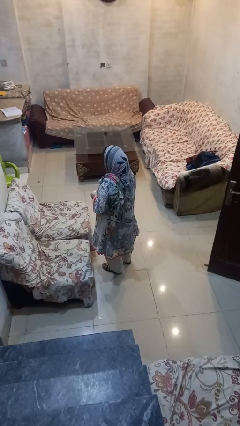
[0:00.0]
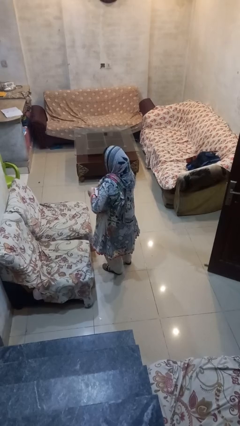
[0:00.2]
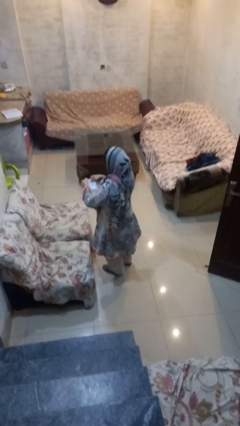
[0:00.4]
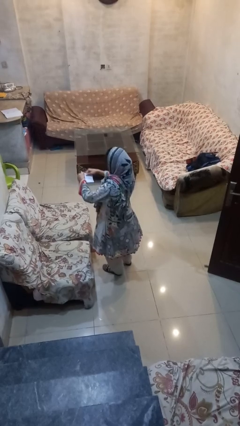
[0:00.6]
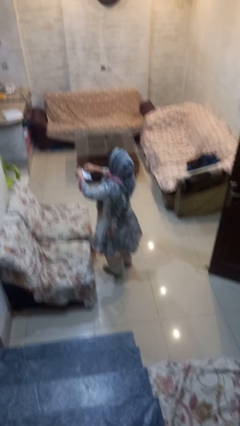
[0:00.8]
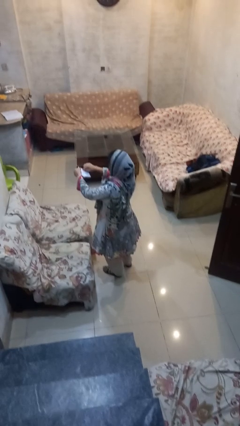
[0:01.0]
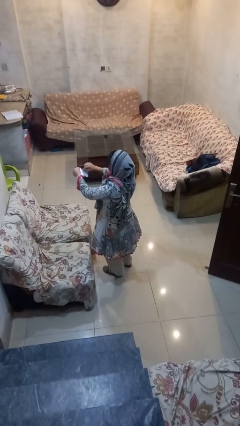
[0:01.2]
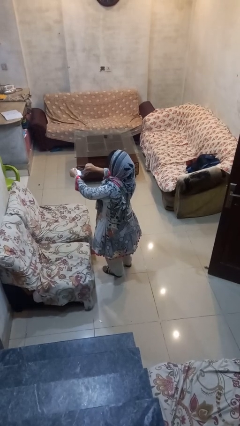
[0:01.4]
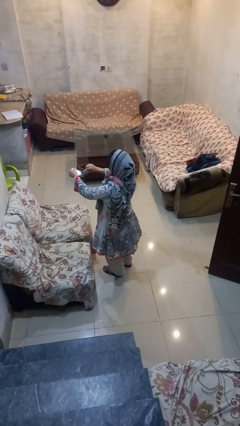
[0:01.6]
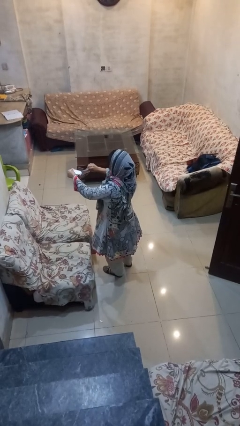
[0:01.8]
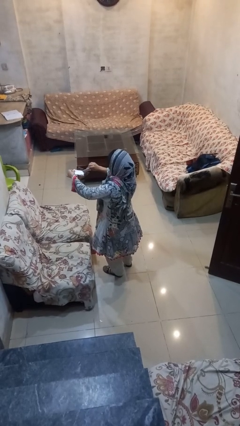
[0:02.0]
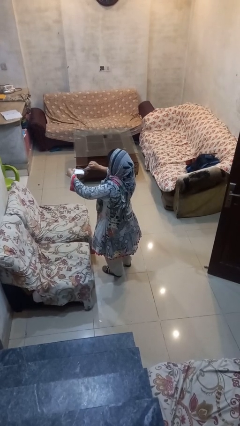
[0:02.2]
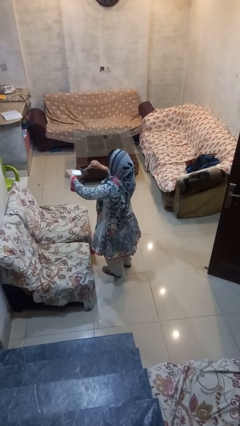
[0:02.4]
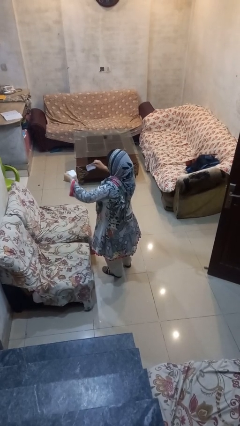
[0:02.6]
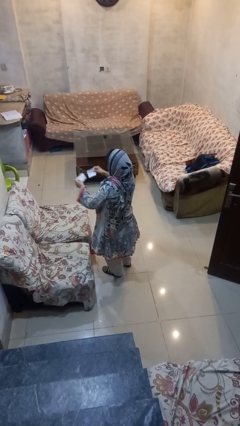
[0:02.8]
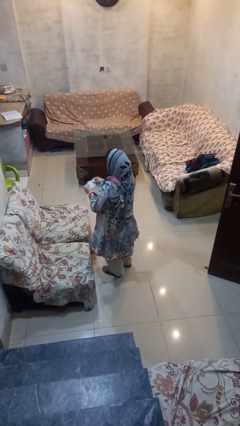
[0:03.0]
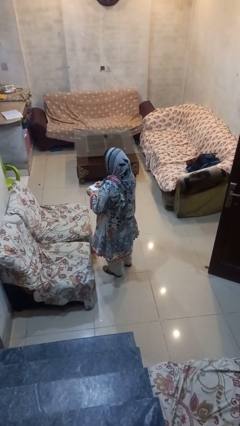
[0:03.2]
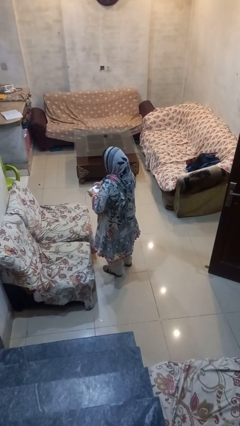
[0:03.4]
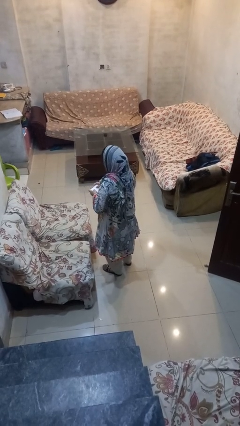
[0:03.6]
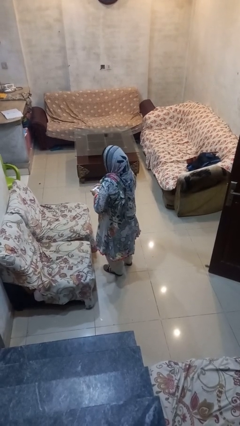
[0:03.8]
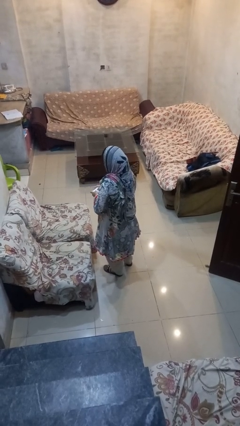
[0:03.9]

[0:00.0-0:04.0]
person tears paper

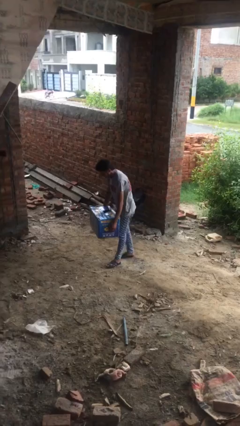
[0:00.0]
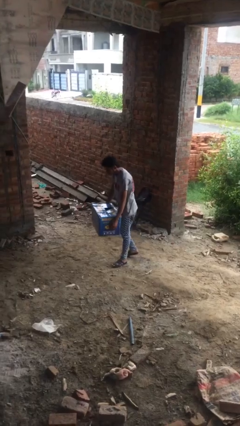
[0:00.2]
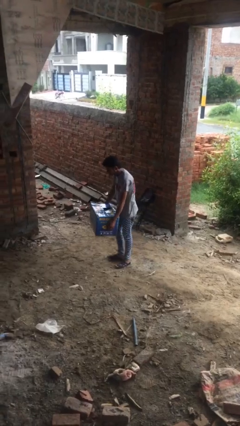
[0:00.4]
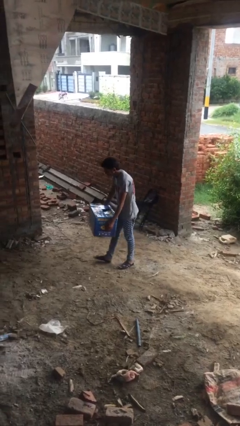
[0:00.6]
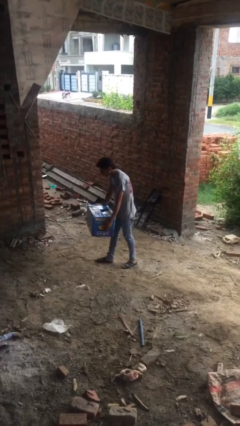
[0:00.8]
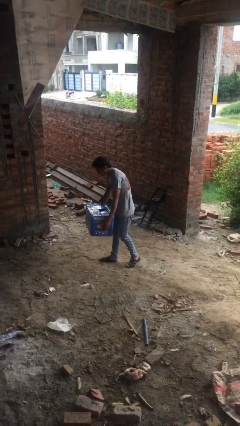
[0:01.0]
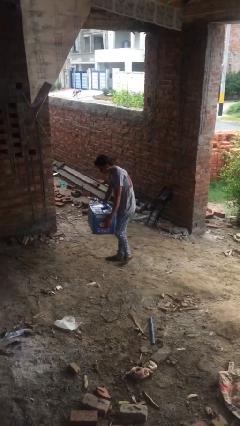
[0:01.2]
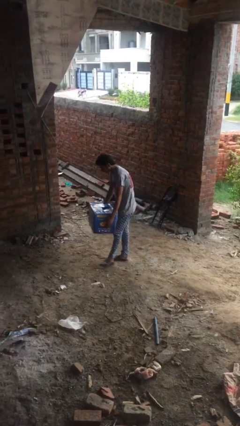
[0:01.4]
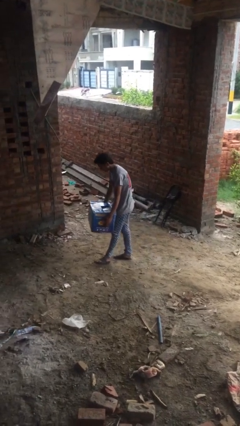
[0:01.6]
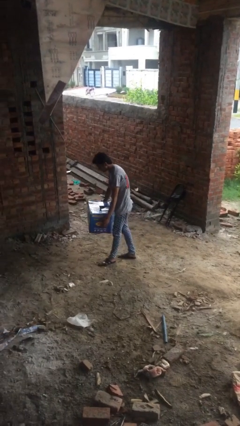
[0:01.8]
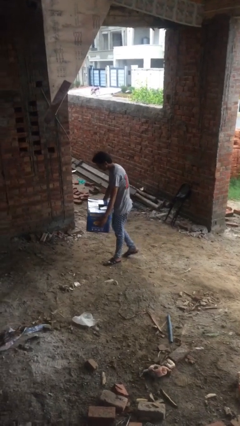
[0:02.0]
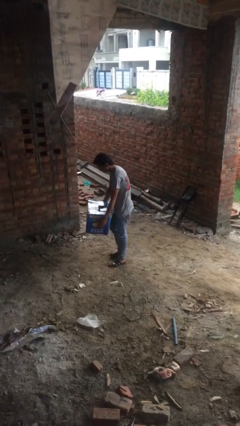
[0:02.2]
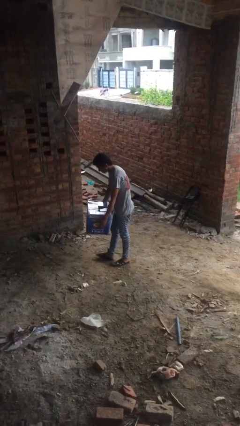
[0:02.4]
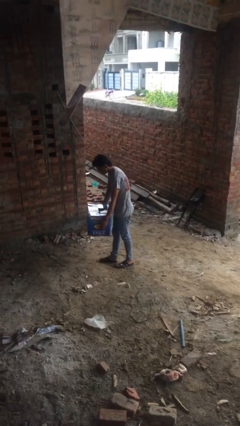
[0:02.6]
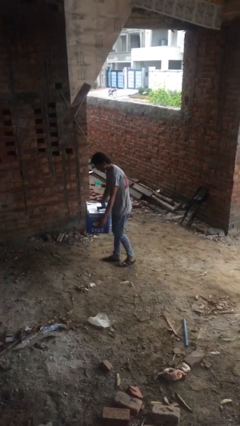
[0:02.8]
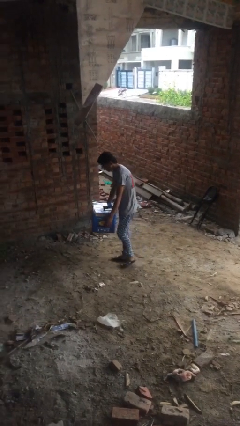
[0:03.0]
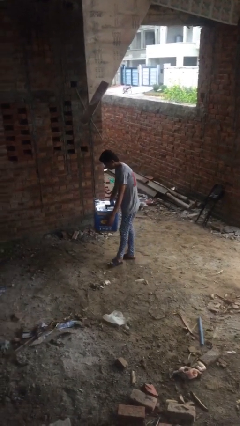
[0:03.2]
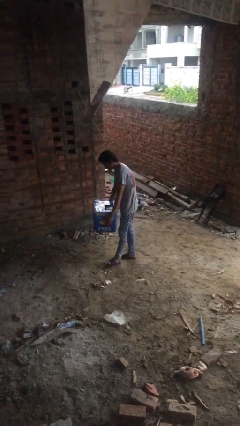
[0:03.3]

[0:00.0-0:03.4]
person carries heavy object

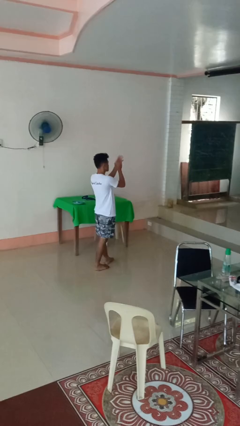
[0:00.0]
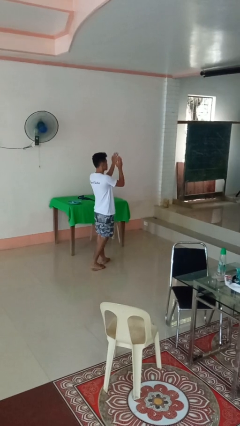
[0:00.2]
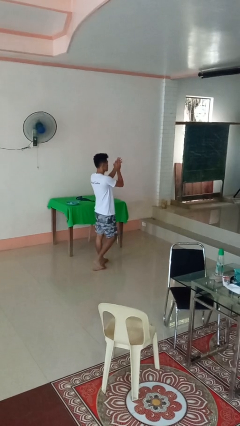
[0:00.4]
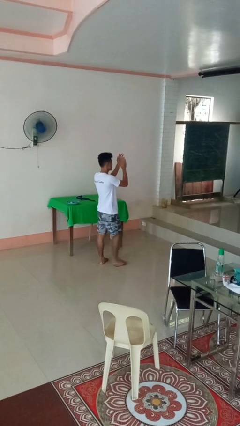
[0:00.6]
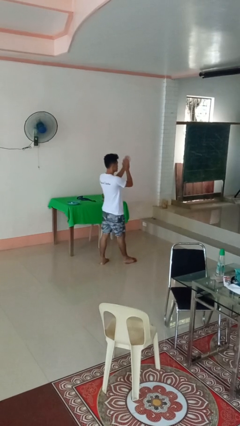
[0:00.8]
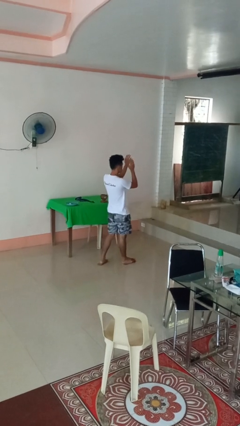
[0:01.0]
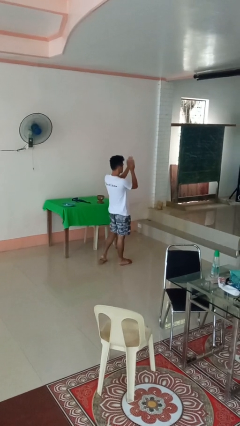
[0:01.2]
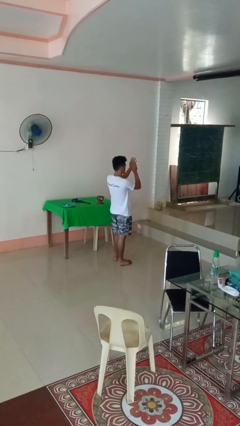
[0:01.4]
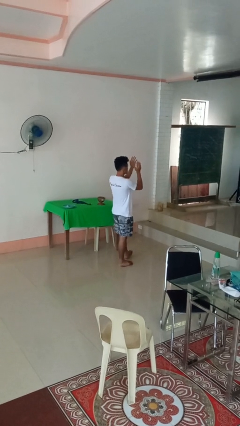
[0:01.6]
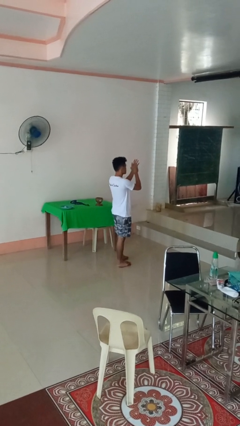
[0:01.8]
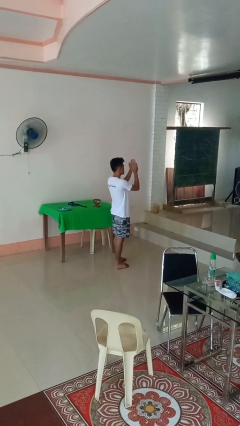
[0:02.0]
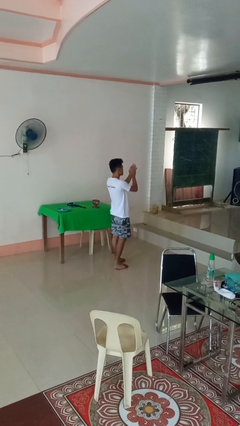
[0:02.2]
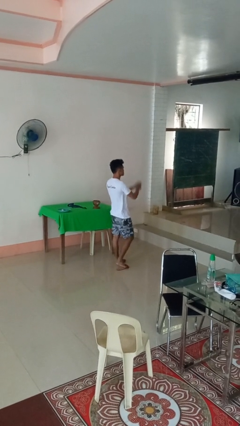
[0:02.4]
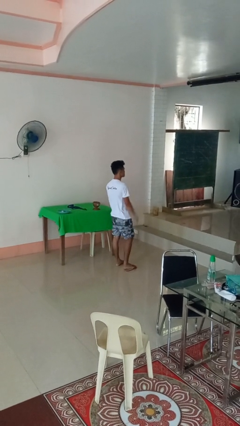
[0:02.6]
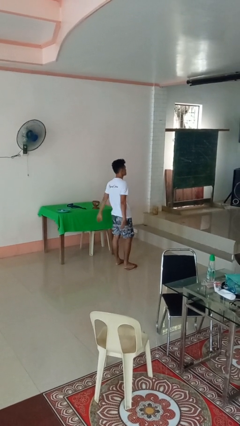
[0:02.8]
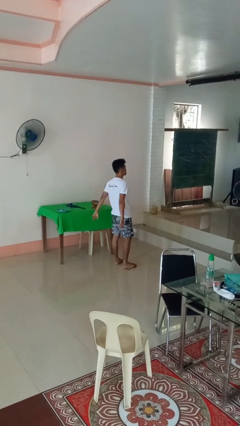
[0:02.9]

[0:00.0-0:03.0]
person claps hands

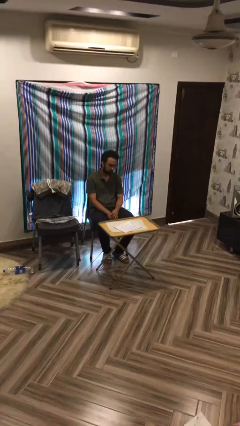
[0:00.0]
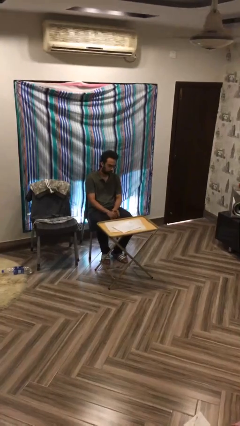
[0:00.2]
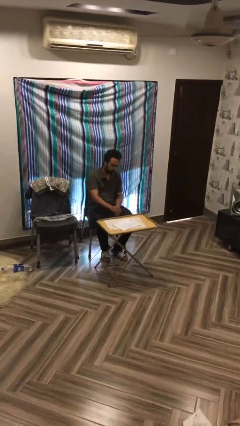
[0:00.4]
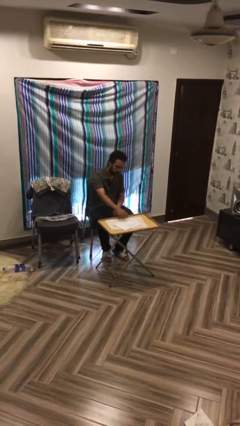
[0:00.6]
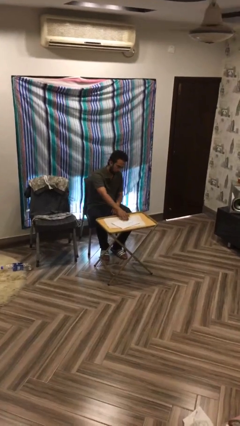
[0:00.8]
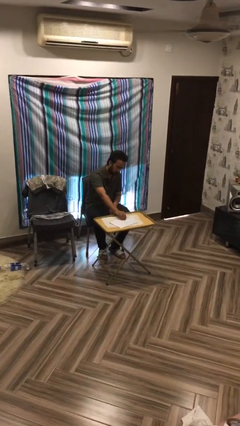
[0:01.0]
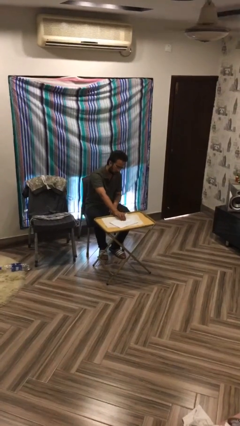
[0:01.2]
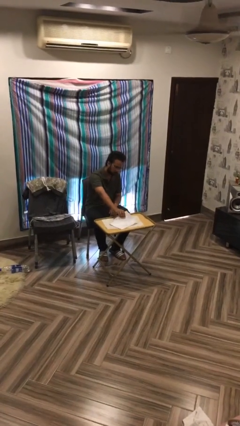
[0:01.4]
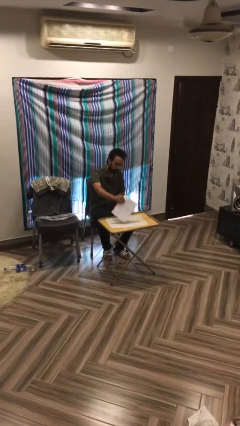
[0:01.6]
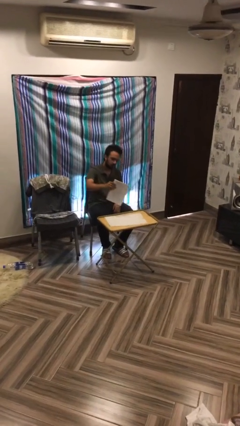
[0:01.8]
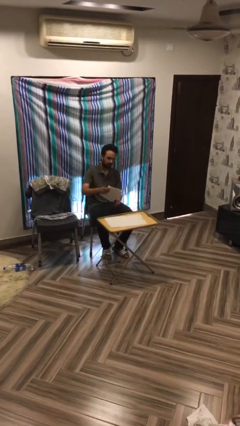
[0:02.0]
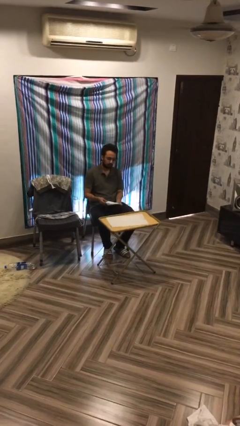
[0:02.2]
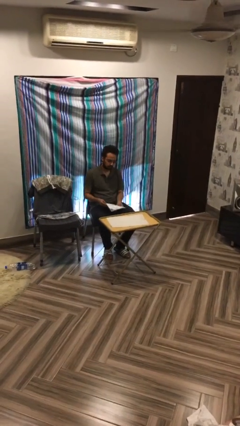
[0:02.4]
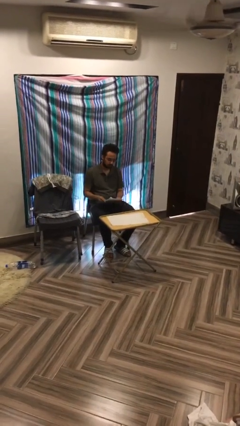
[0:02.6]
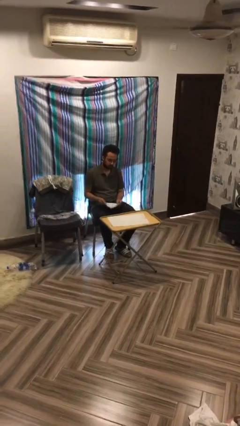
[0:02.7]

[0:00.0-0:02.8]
person picks up object from table

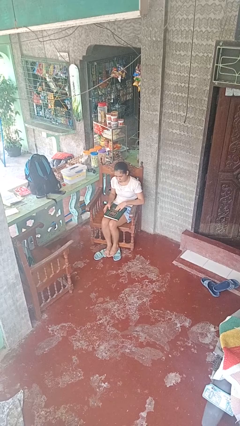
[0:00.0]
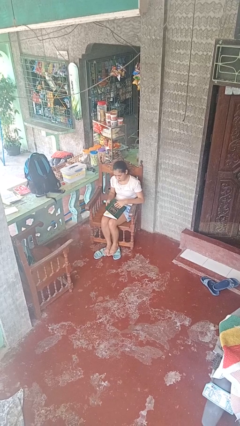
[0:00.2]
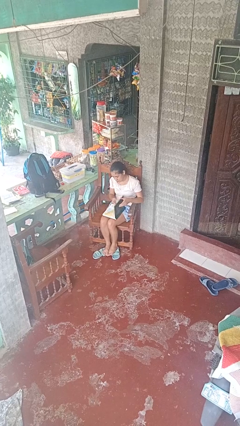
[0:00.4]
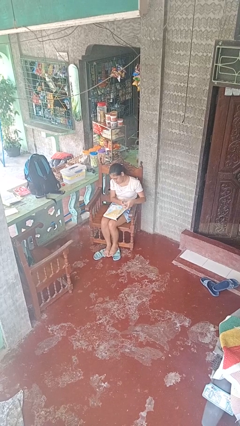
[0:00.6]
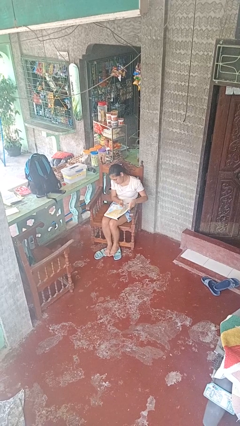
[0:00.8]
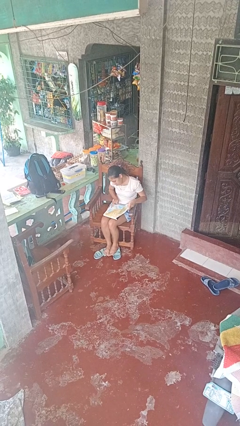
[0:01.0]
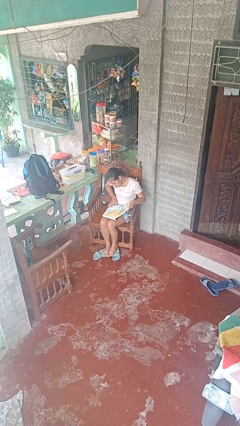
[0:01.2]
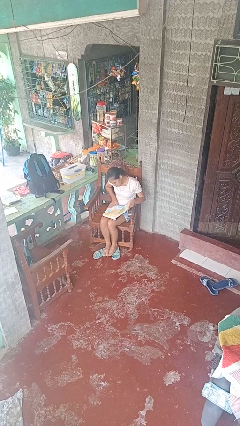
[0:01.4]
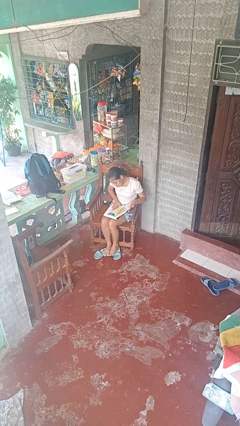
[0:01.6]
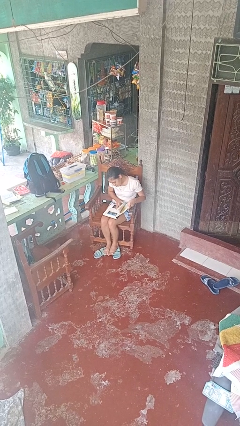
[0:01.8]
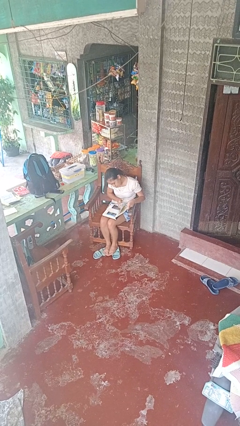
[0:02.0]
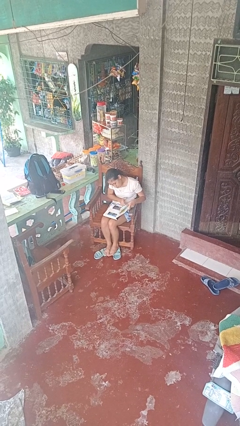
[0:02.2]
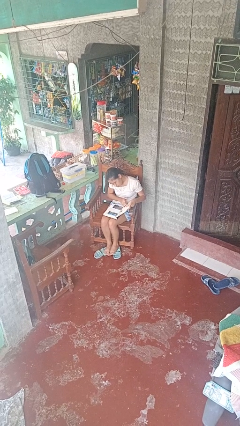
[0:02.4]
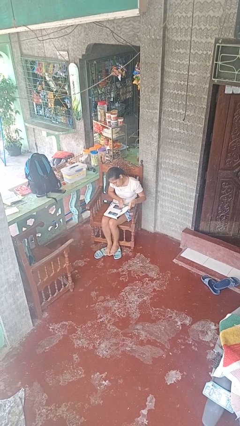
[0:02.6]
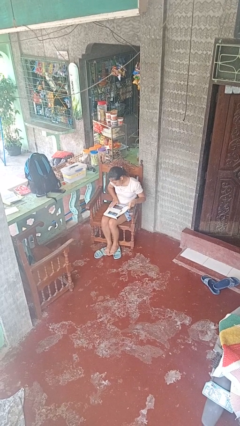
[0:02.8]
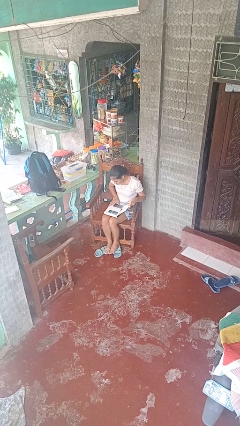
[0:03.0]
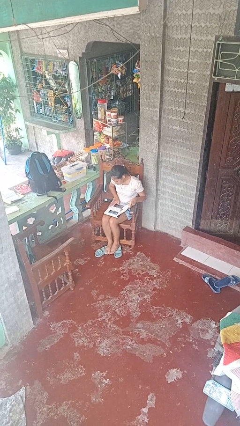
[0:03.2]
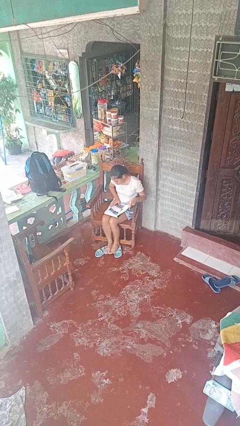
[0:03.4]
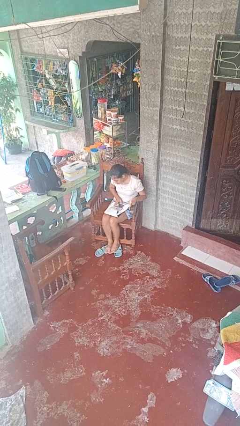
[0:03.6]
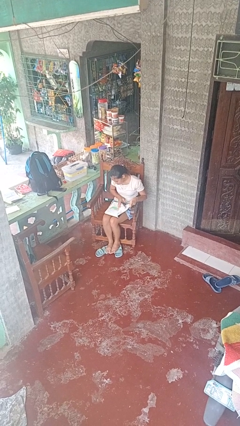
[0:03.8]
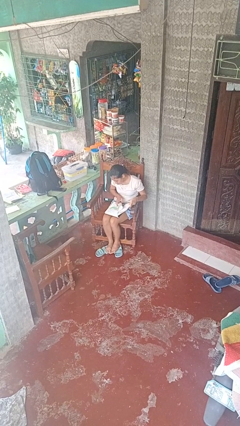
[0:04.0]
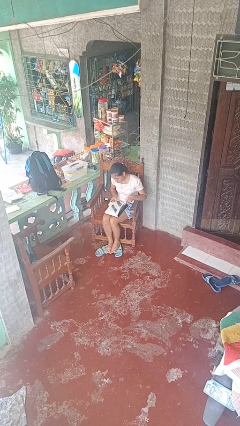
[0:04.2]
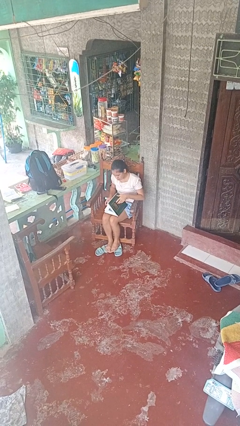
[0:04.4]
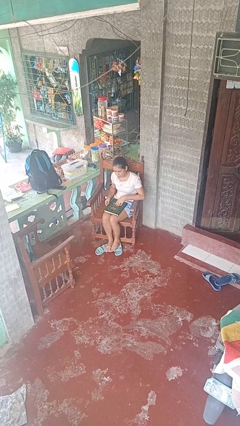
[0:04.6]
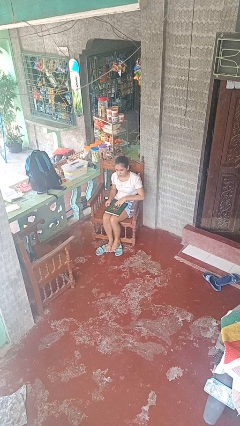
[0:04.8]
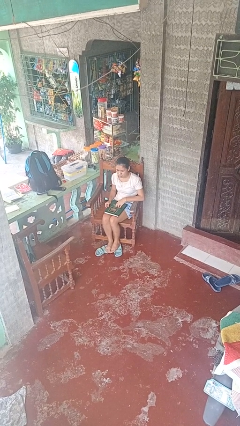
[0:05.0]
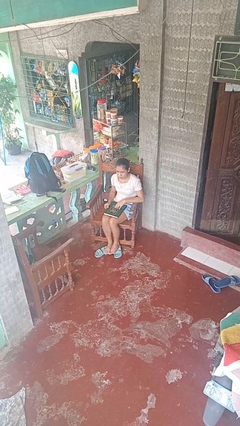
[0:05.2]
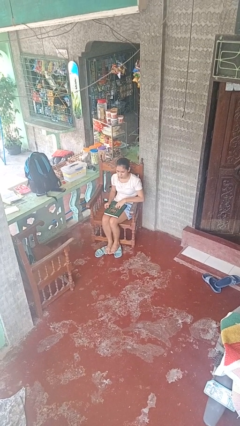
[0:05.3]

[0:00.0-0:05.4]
person reads book
